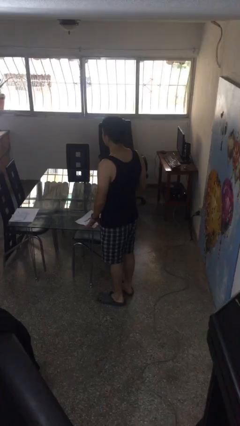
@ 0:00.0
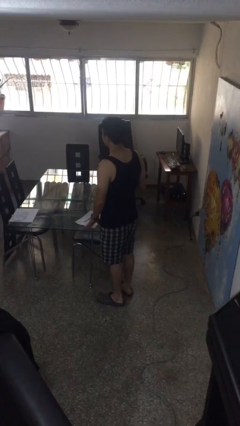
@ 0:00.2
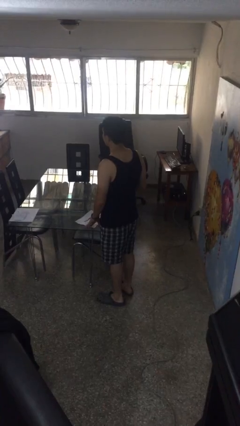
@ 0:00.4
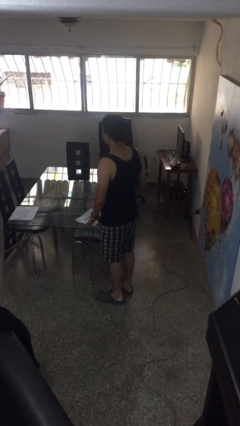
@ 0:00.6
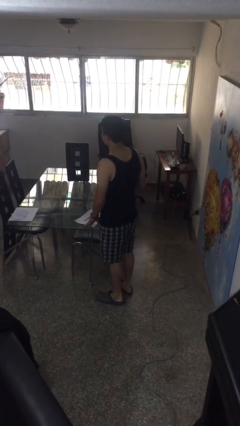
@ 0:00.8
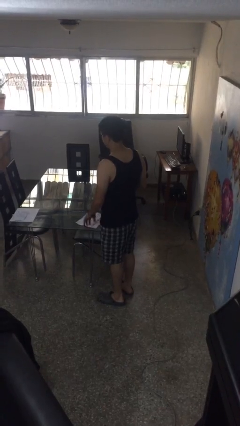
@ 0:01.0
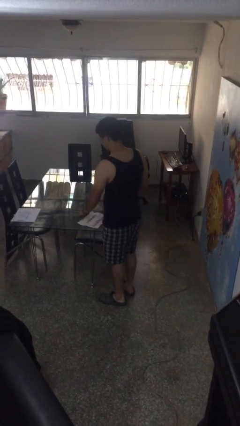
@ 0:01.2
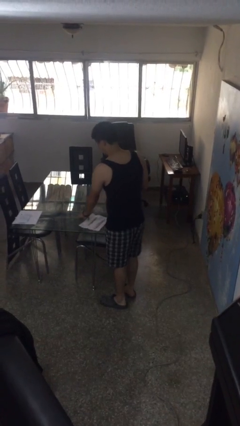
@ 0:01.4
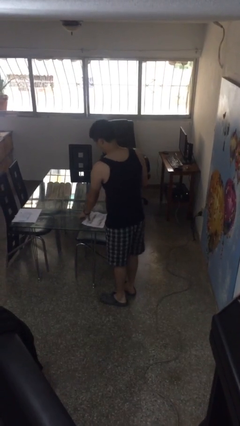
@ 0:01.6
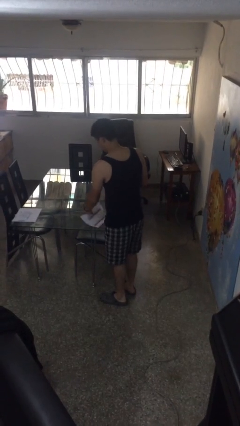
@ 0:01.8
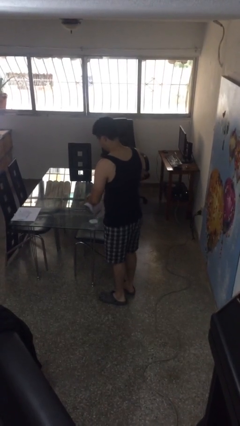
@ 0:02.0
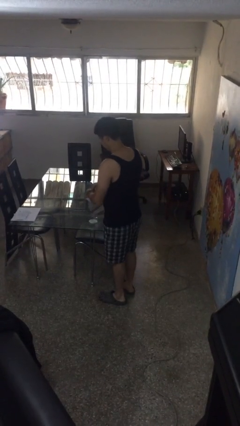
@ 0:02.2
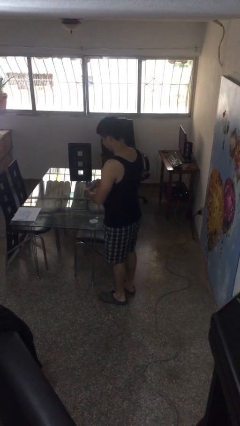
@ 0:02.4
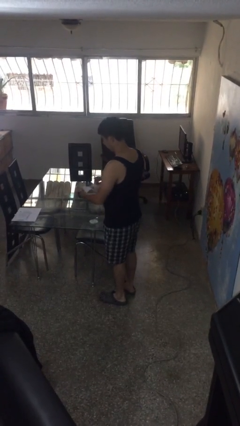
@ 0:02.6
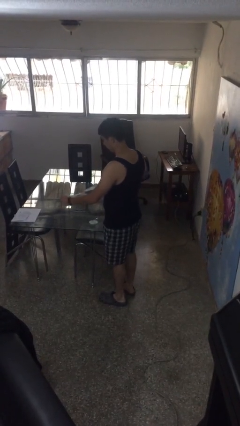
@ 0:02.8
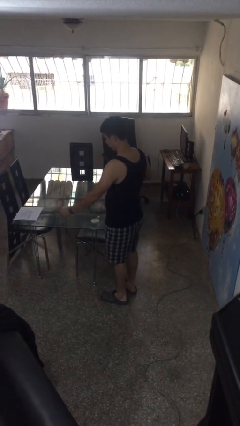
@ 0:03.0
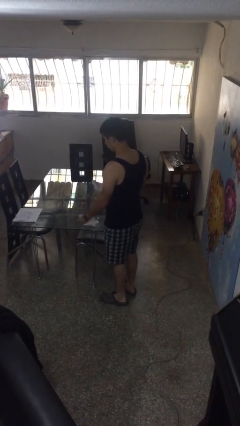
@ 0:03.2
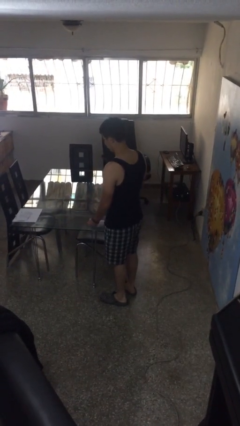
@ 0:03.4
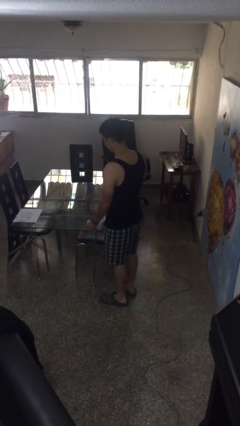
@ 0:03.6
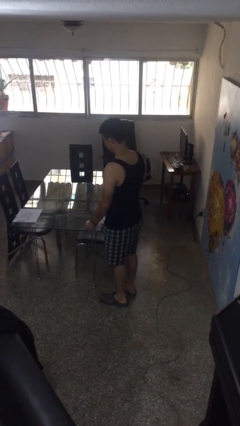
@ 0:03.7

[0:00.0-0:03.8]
person tears paper

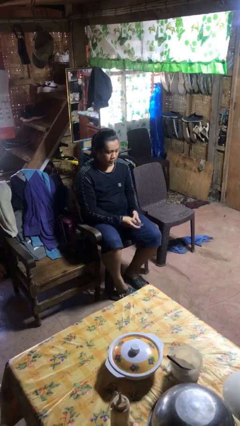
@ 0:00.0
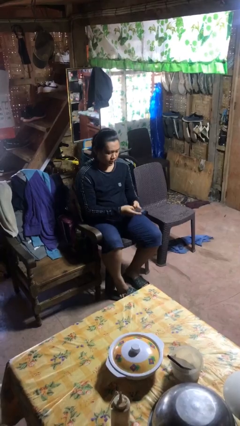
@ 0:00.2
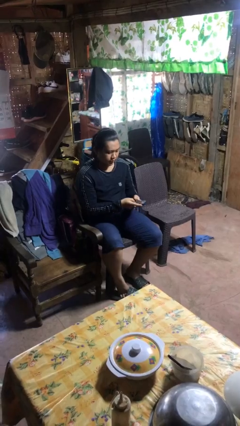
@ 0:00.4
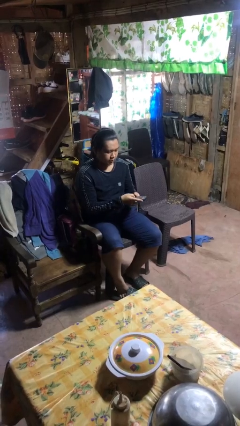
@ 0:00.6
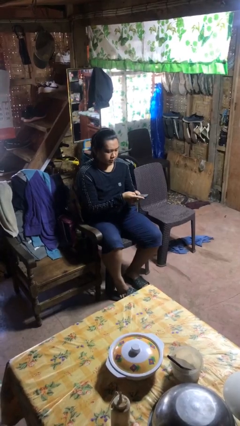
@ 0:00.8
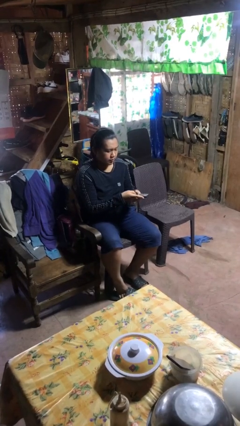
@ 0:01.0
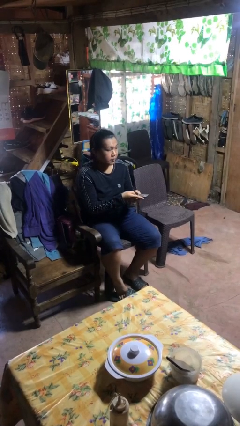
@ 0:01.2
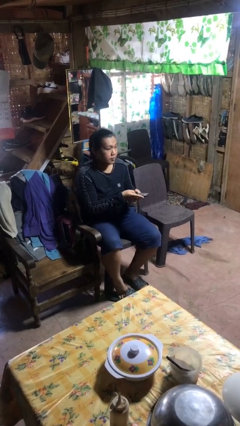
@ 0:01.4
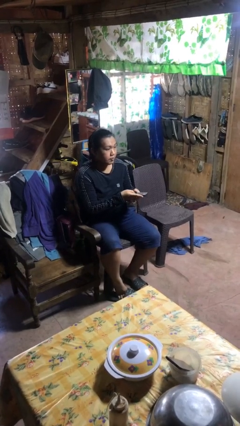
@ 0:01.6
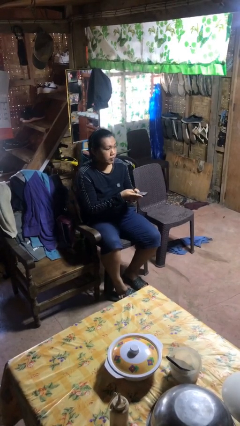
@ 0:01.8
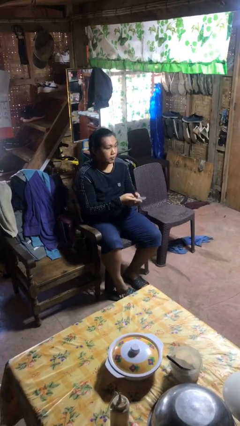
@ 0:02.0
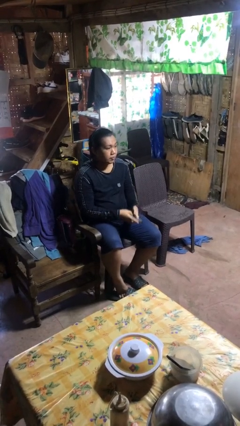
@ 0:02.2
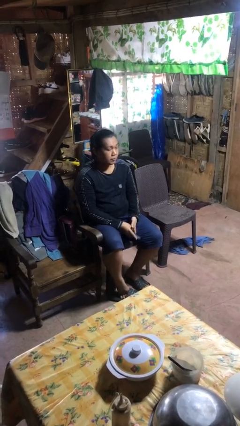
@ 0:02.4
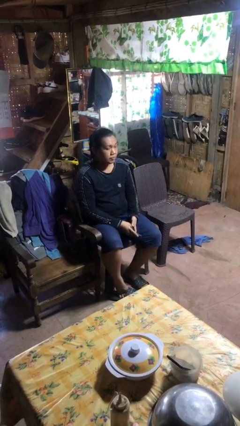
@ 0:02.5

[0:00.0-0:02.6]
person uses television remote

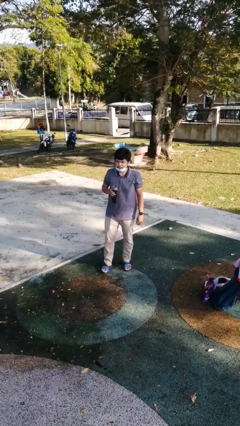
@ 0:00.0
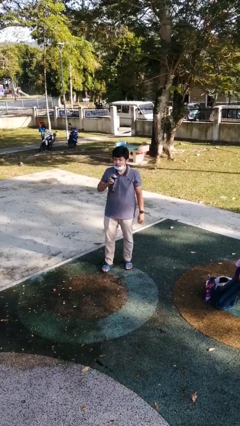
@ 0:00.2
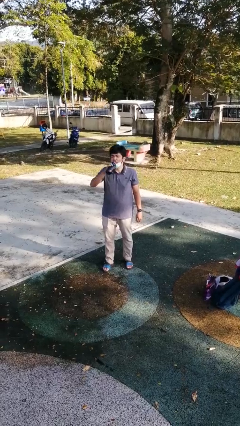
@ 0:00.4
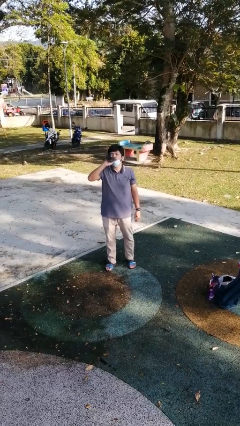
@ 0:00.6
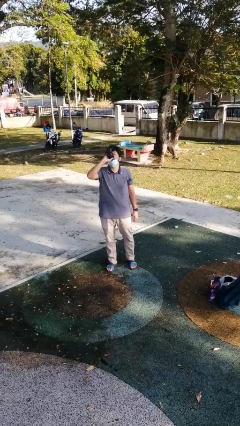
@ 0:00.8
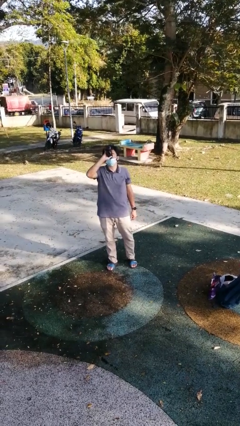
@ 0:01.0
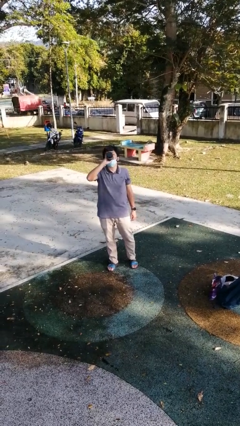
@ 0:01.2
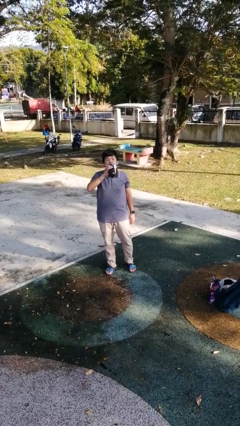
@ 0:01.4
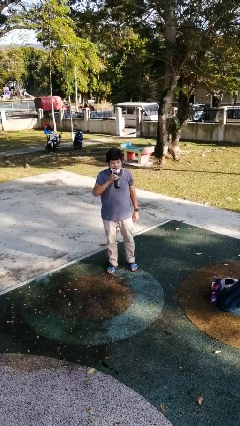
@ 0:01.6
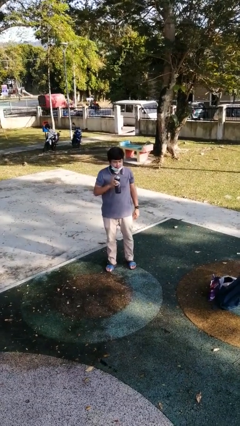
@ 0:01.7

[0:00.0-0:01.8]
person drinks from bottle

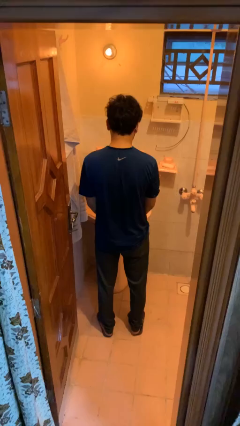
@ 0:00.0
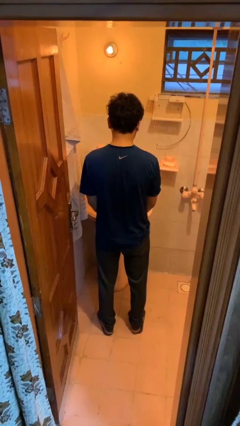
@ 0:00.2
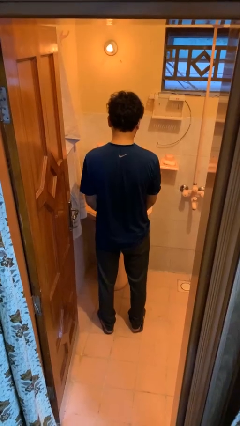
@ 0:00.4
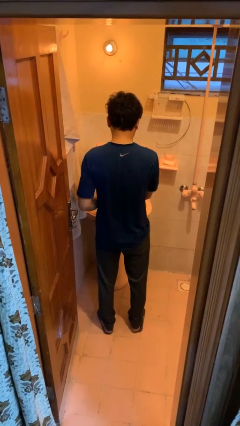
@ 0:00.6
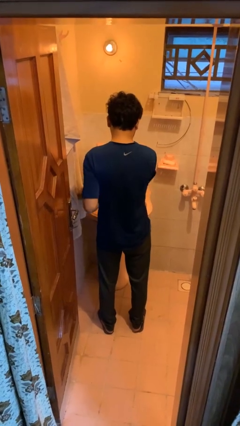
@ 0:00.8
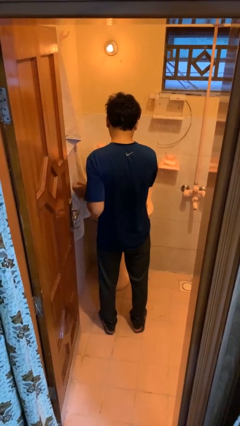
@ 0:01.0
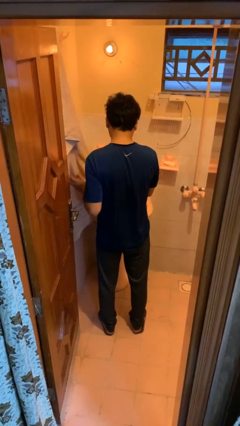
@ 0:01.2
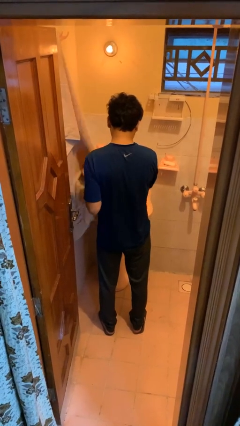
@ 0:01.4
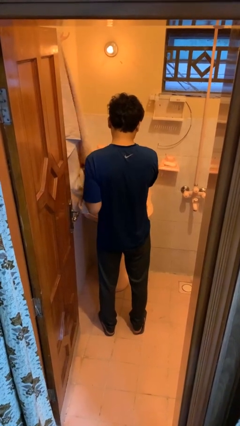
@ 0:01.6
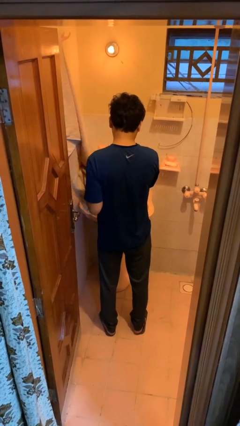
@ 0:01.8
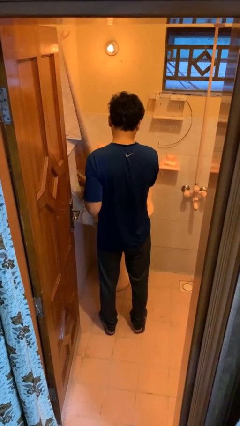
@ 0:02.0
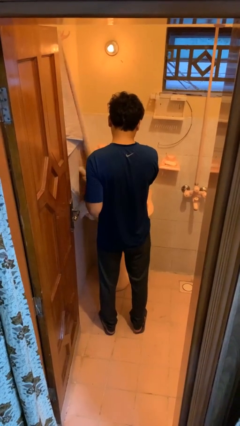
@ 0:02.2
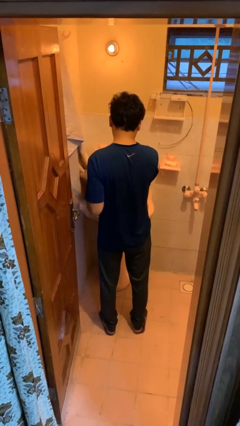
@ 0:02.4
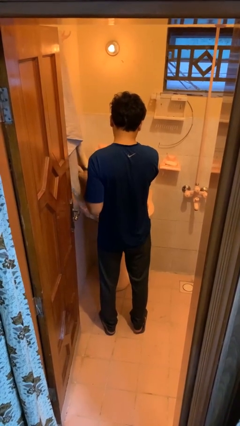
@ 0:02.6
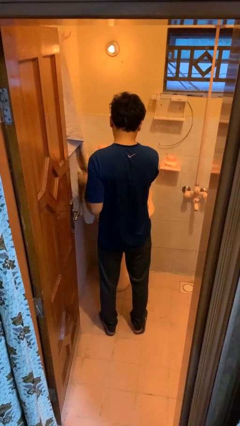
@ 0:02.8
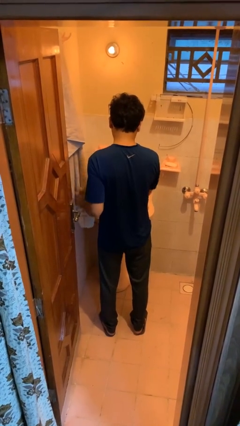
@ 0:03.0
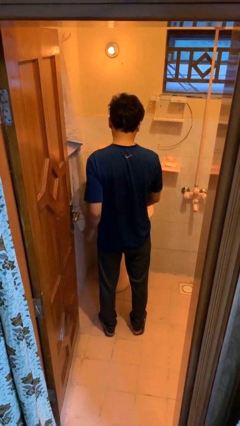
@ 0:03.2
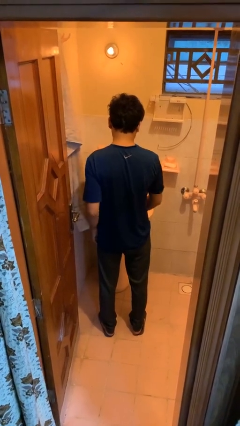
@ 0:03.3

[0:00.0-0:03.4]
person dries hands with towel

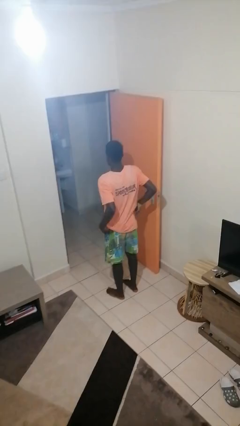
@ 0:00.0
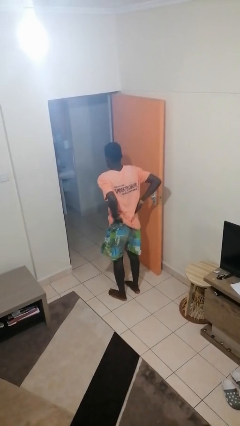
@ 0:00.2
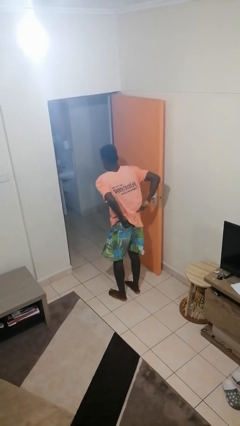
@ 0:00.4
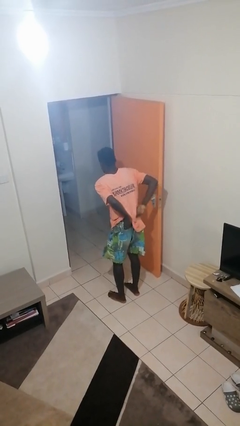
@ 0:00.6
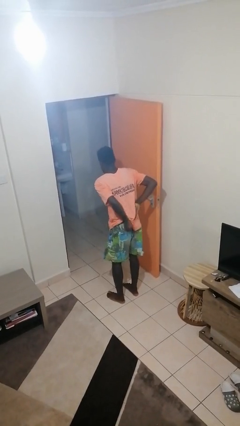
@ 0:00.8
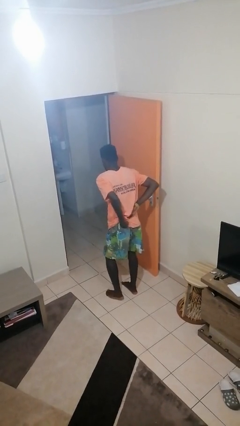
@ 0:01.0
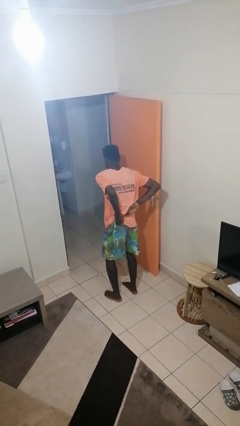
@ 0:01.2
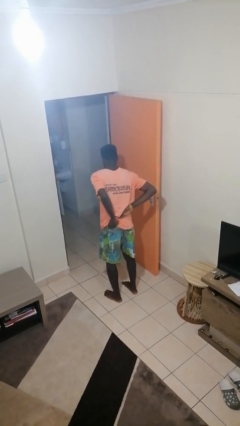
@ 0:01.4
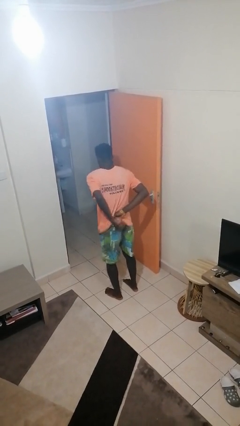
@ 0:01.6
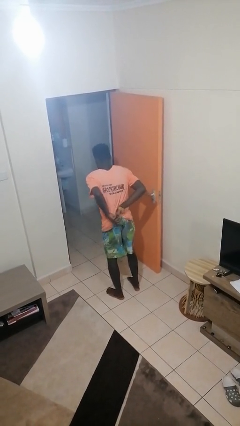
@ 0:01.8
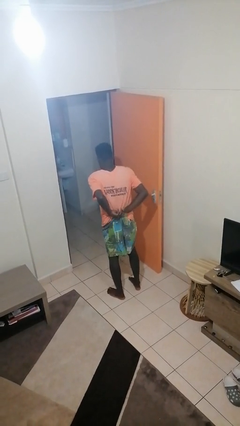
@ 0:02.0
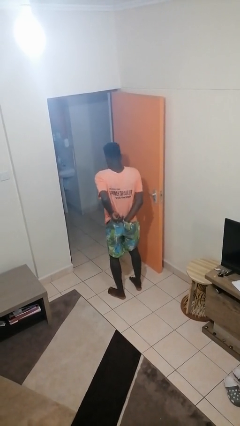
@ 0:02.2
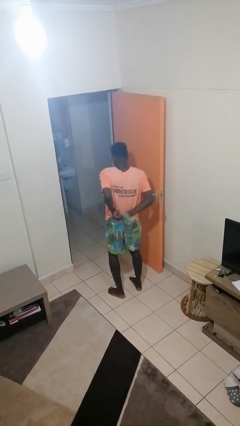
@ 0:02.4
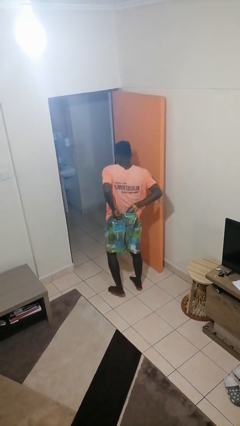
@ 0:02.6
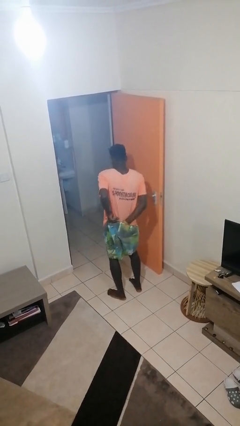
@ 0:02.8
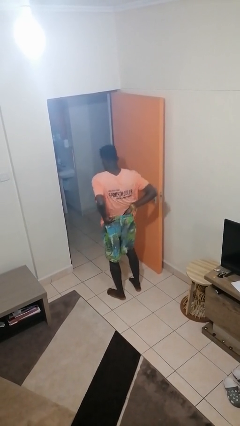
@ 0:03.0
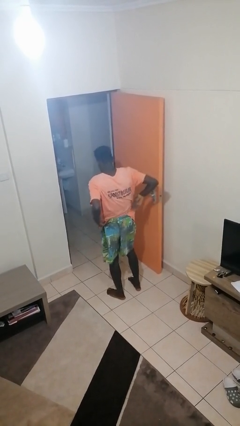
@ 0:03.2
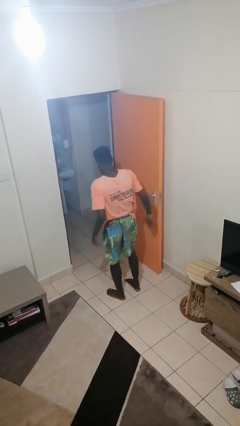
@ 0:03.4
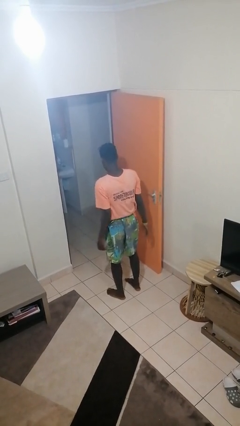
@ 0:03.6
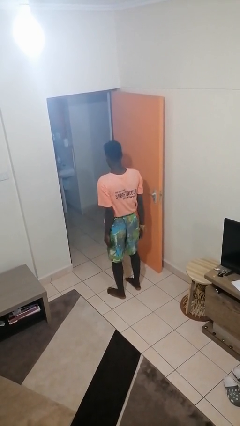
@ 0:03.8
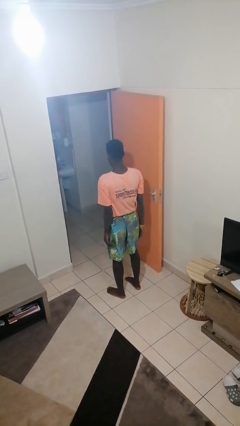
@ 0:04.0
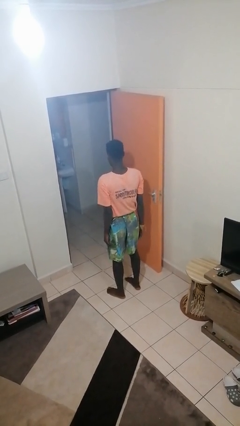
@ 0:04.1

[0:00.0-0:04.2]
person tucks in shirt

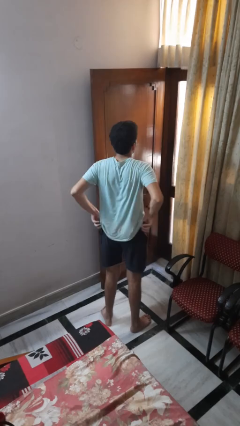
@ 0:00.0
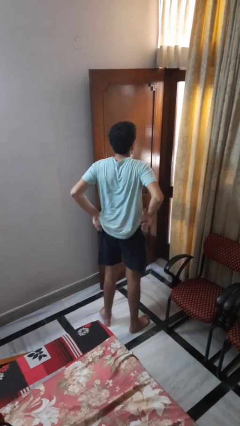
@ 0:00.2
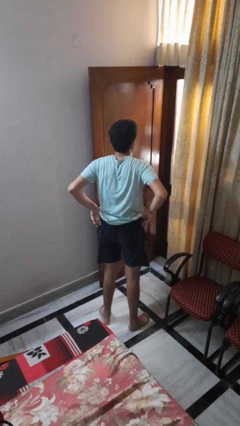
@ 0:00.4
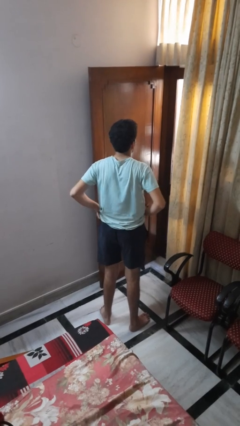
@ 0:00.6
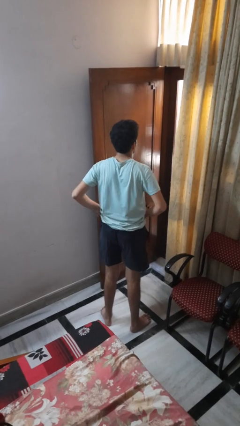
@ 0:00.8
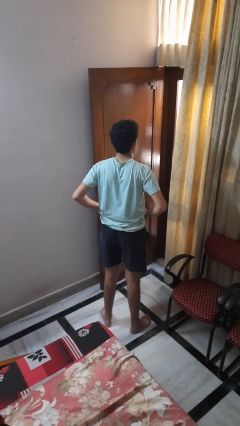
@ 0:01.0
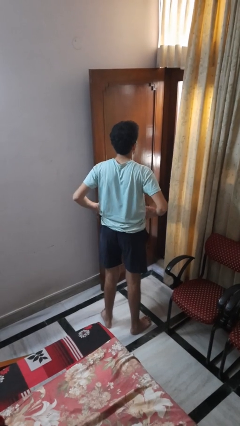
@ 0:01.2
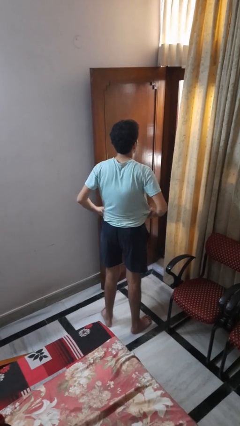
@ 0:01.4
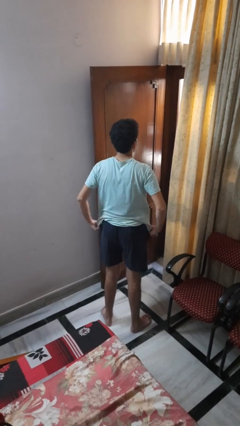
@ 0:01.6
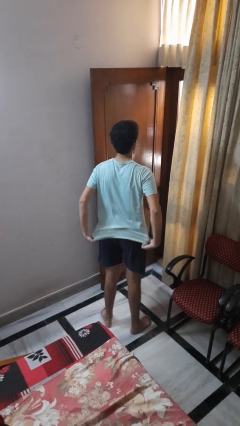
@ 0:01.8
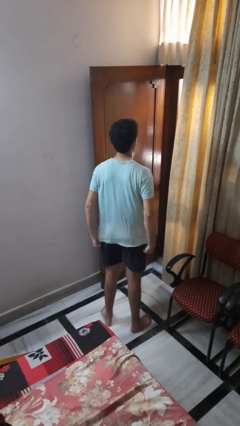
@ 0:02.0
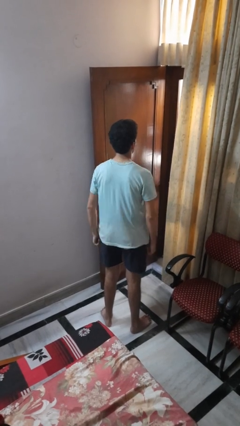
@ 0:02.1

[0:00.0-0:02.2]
person hikes up pants
